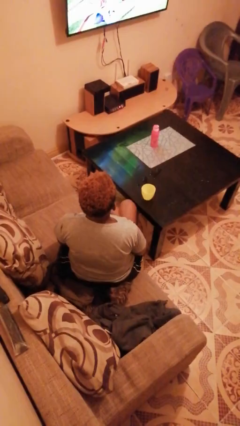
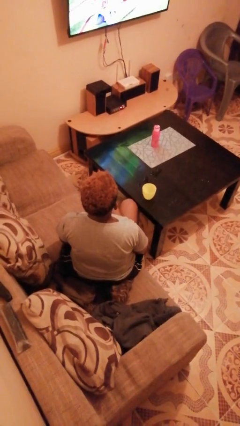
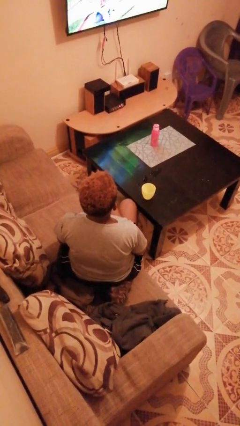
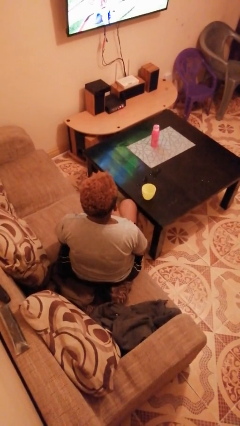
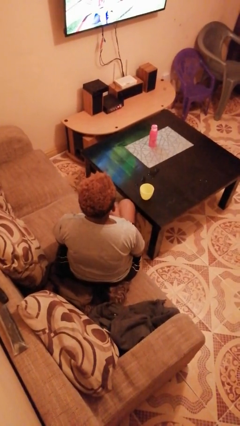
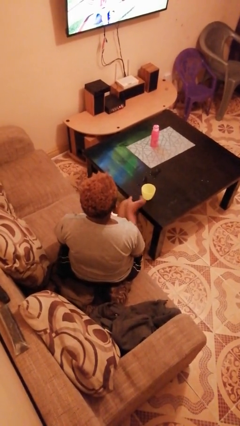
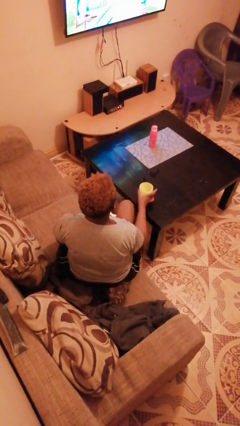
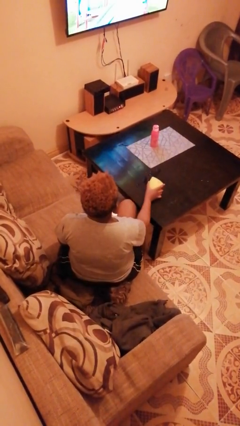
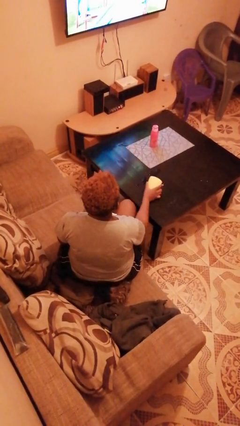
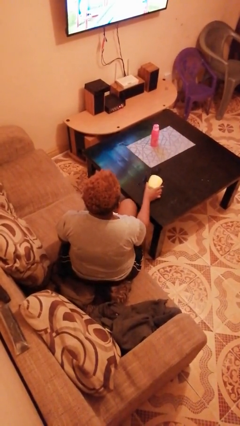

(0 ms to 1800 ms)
person spills on table

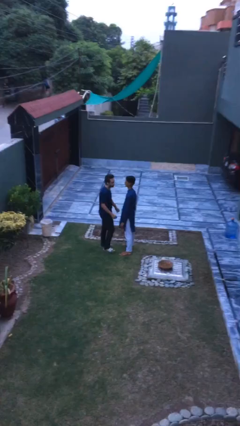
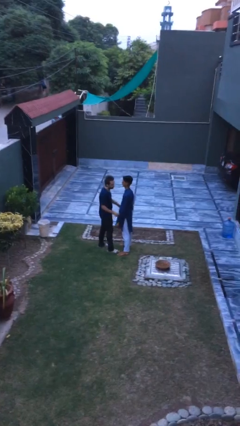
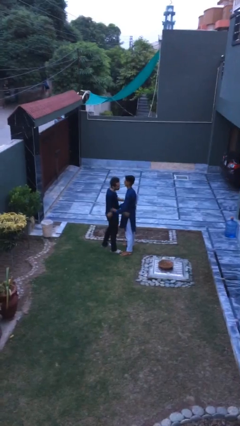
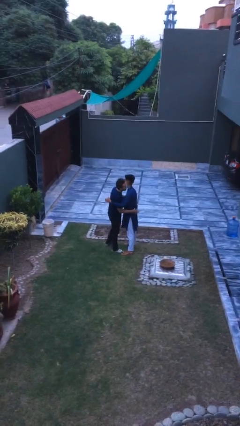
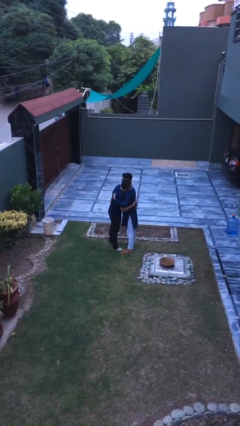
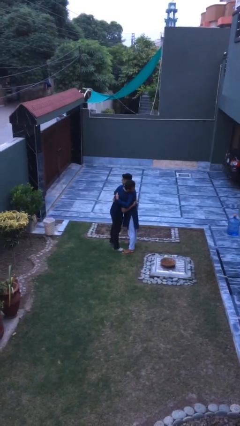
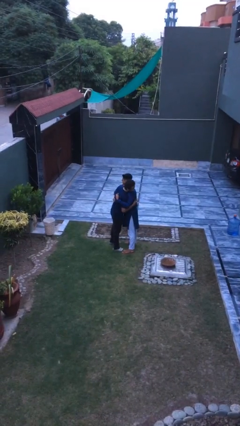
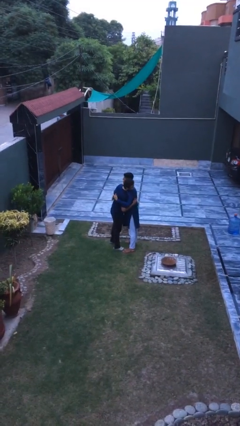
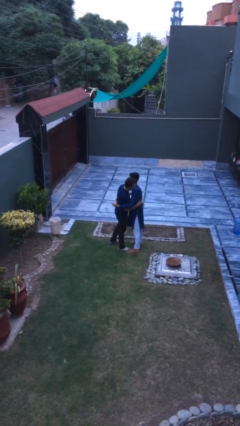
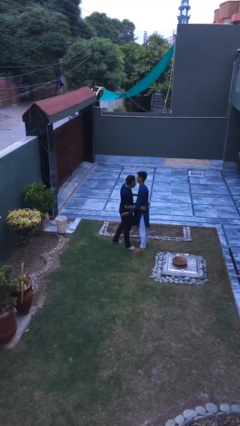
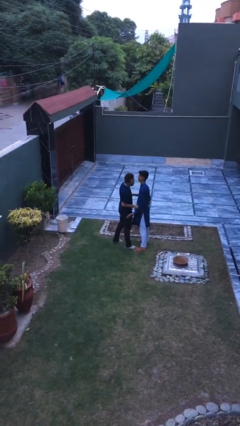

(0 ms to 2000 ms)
person embraces person

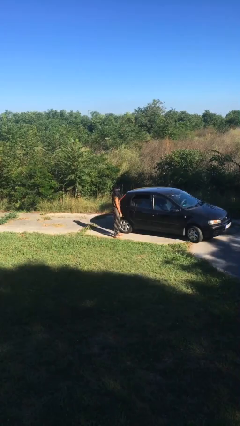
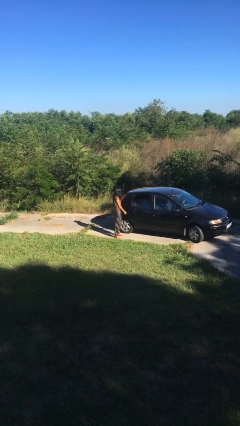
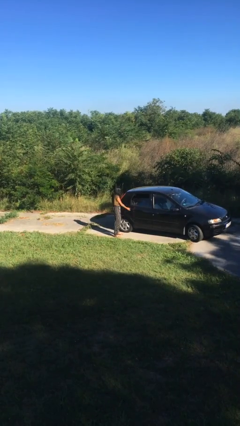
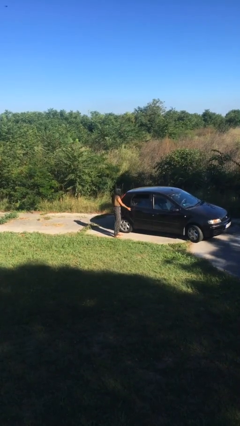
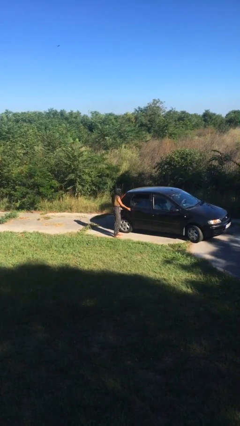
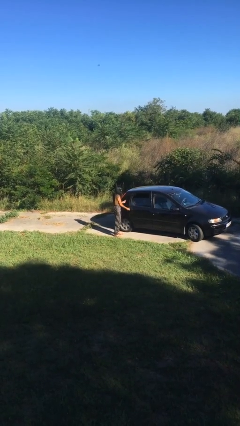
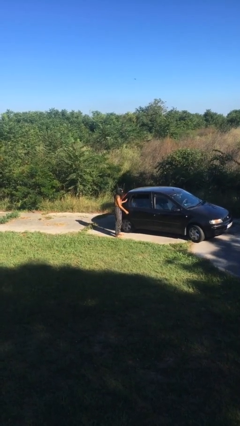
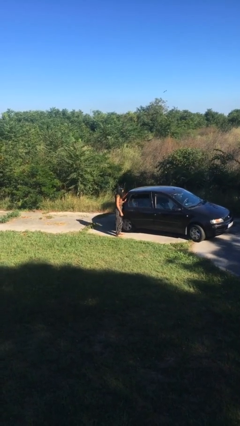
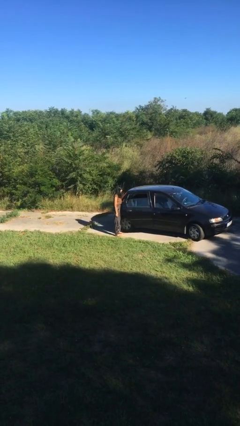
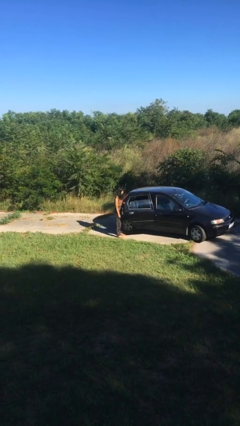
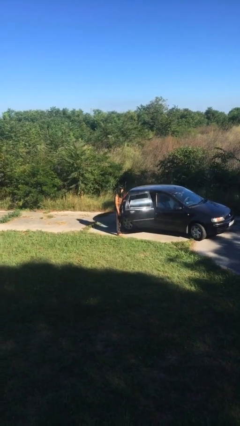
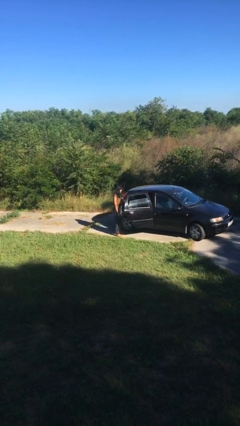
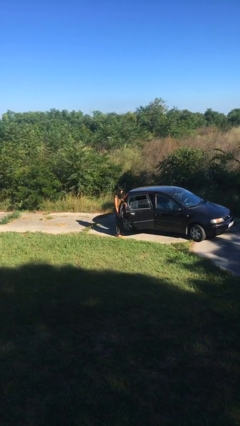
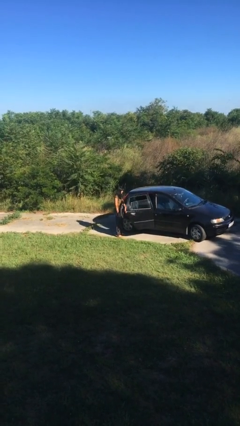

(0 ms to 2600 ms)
person opens car door

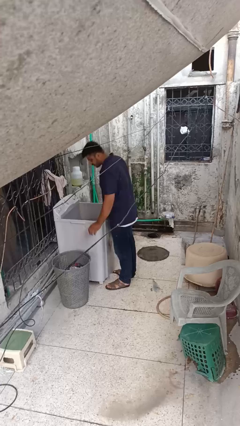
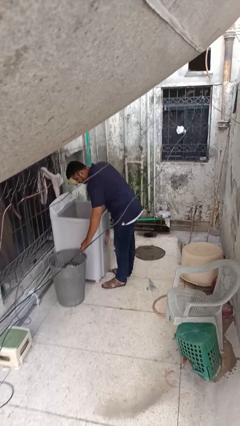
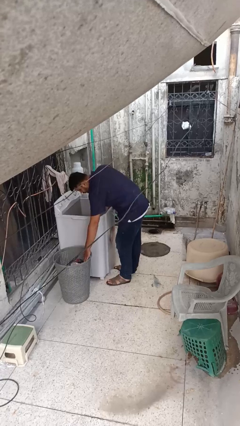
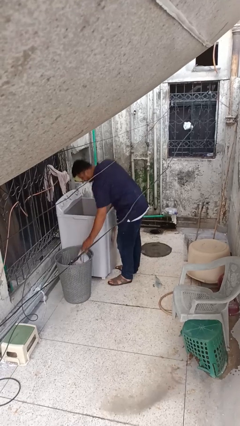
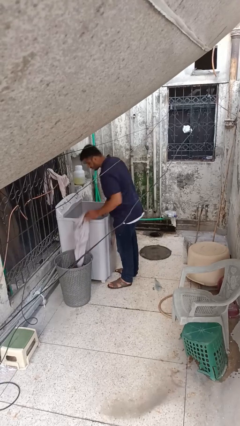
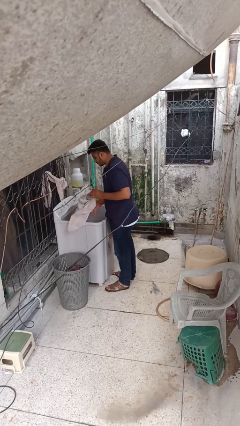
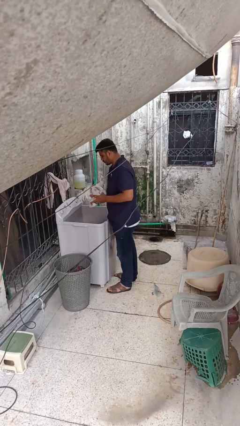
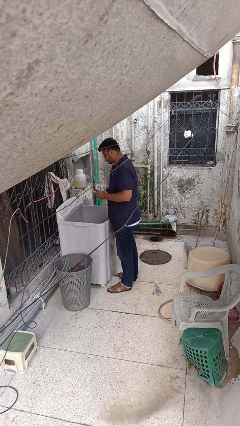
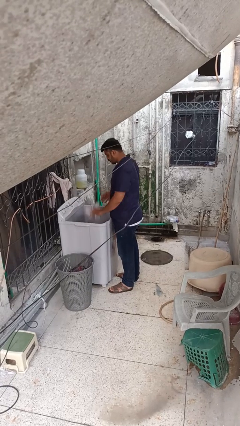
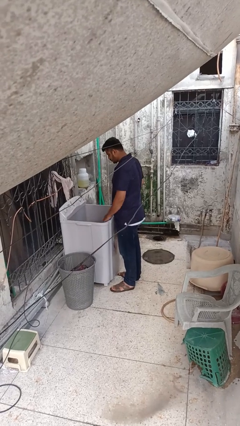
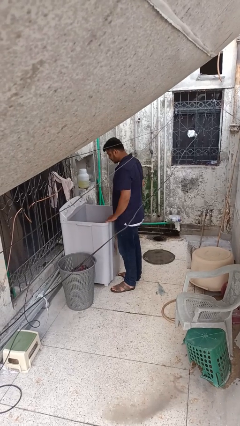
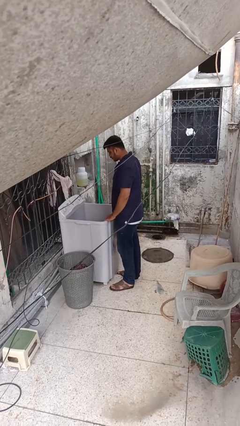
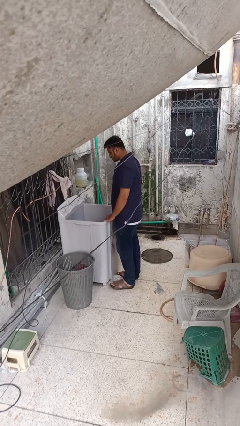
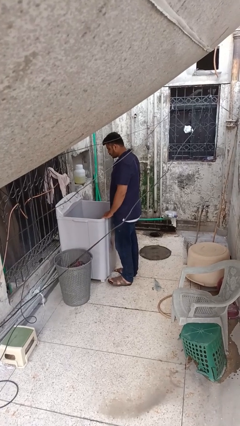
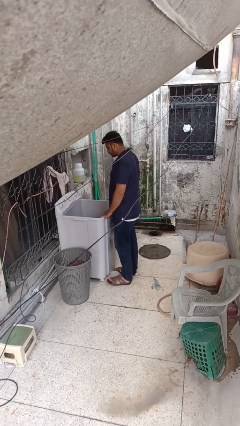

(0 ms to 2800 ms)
person unloads clotheswasher

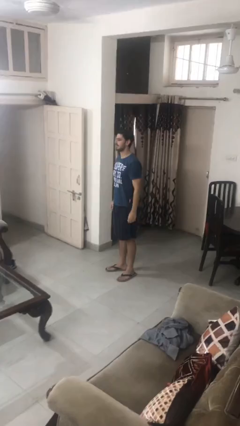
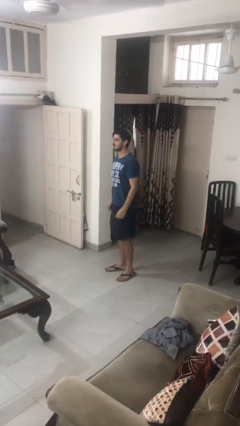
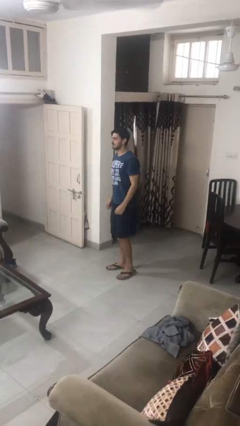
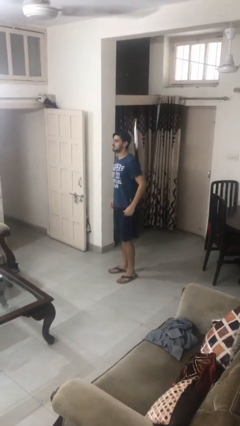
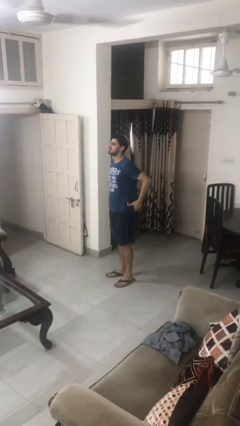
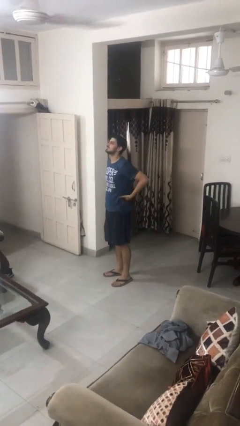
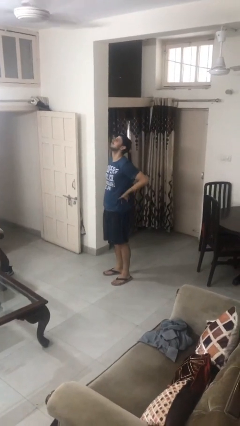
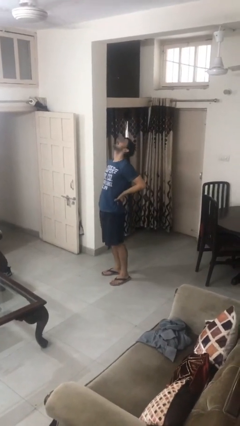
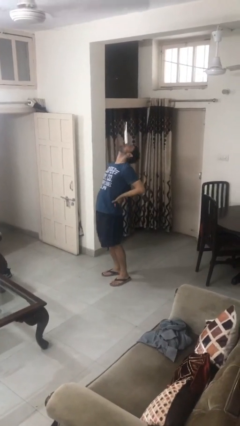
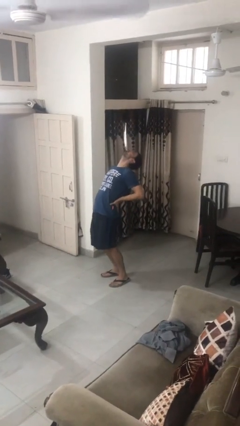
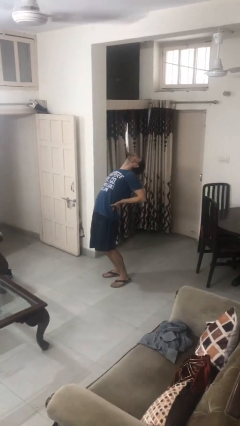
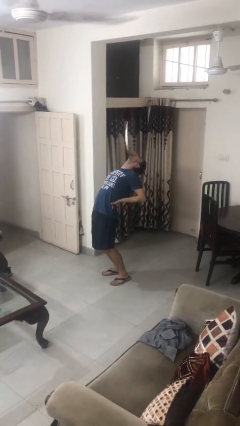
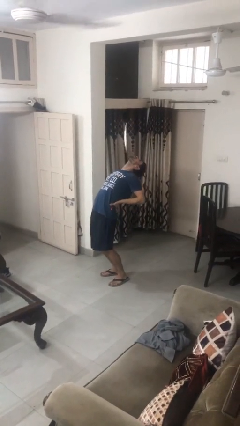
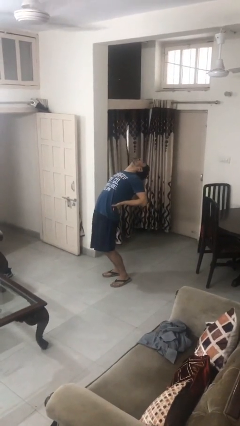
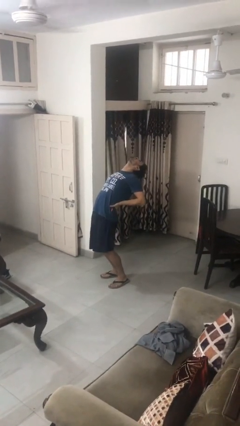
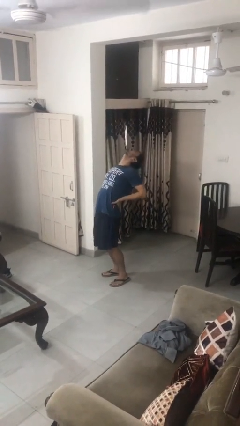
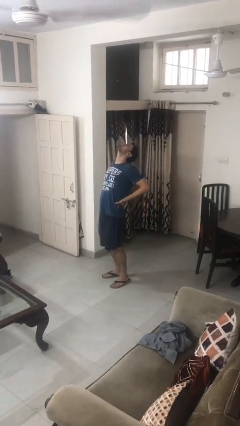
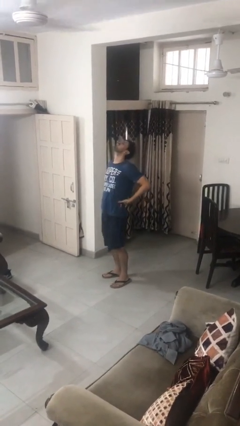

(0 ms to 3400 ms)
person stretches back

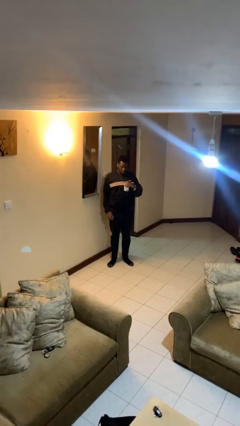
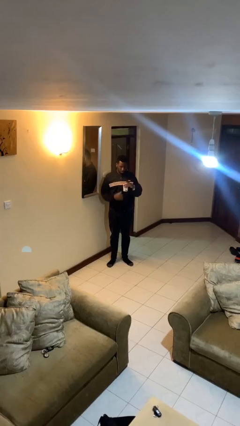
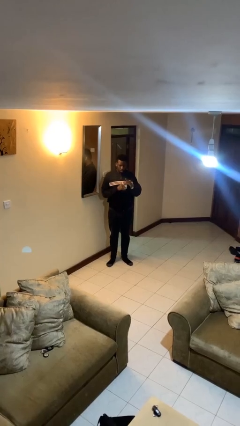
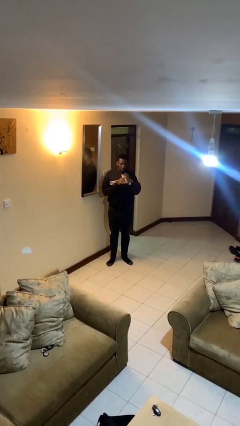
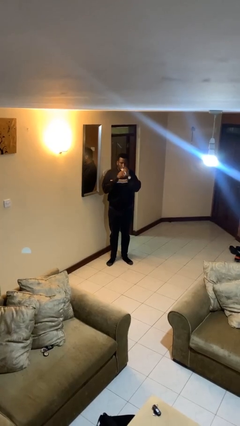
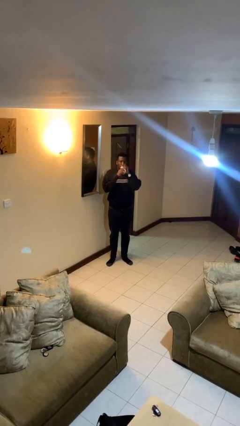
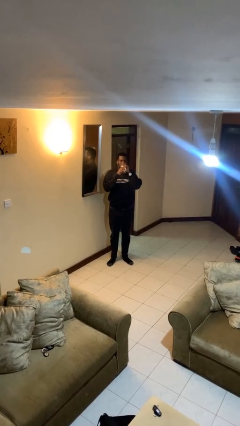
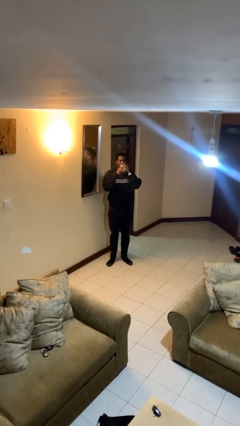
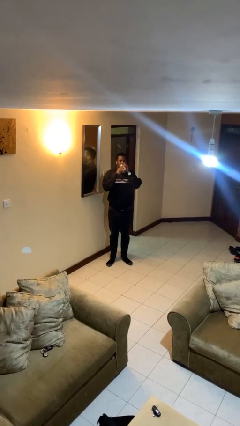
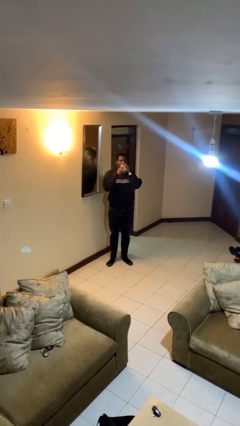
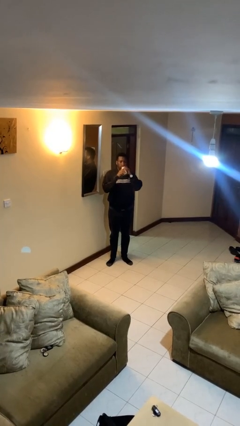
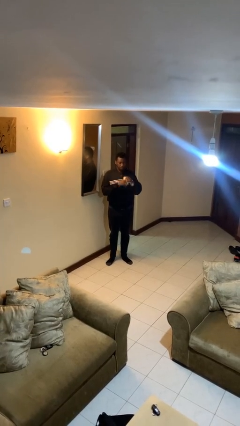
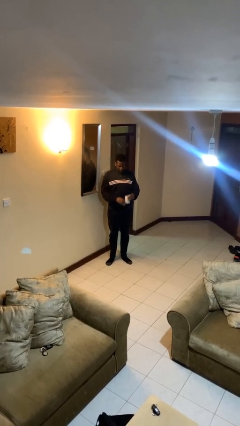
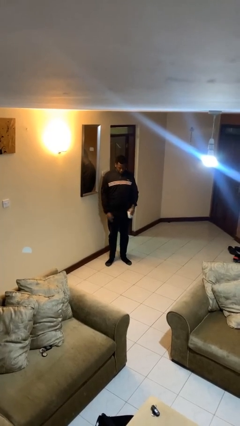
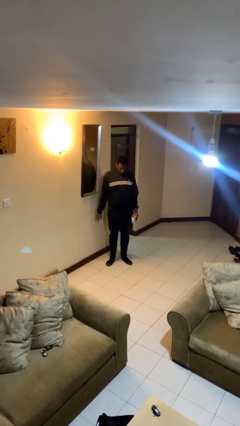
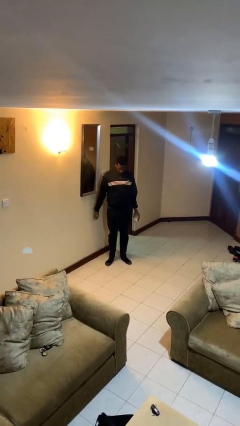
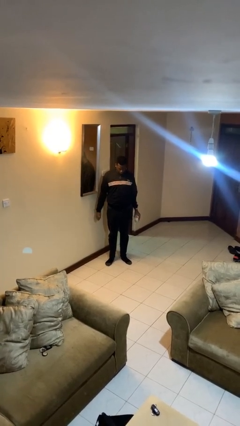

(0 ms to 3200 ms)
person drinks from beverage can

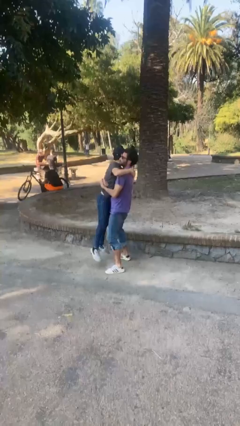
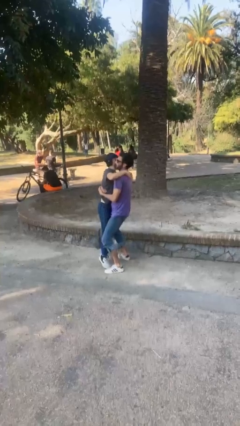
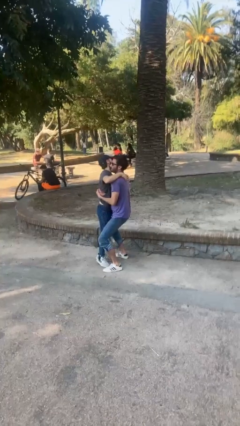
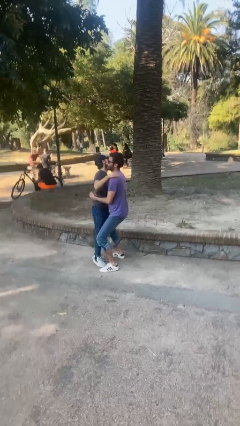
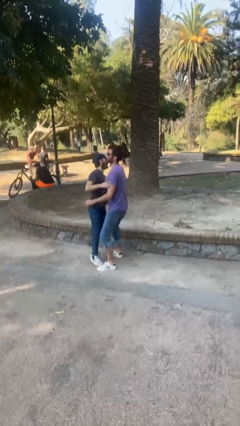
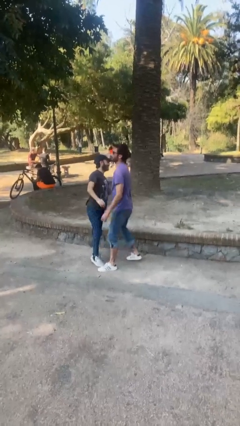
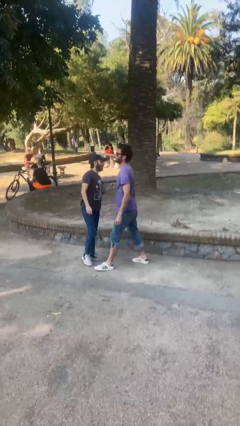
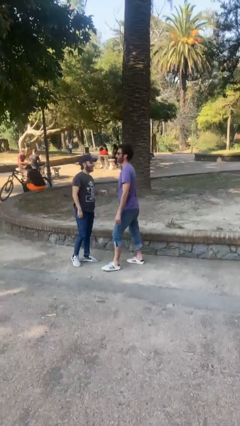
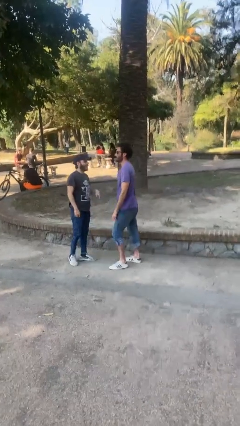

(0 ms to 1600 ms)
person puts down person
